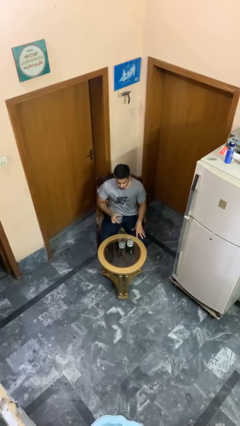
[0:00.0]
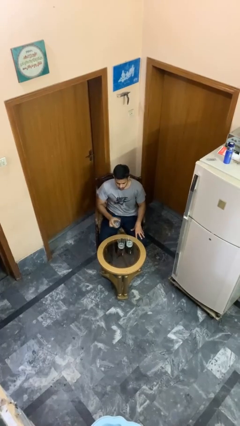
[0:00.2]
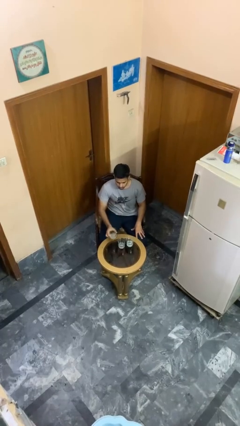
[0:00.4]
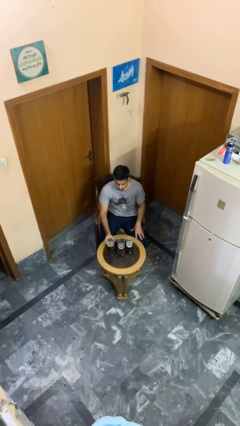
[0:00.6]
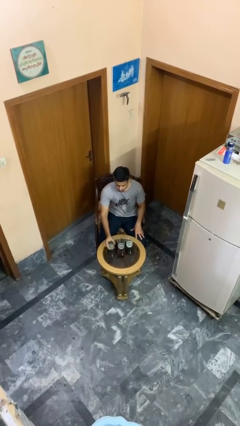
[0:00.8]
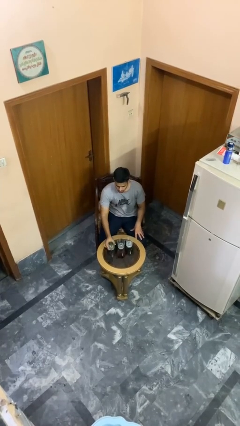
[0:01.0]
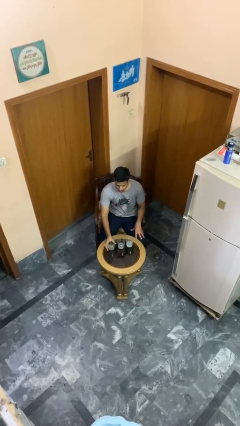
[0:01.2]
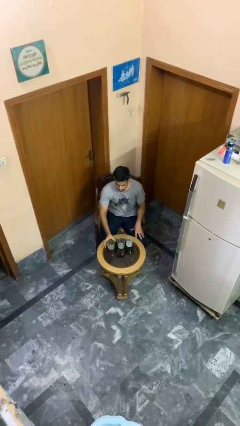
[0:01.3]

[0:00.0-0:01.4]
person puts down object on table

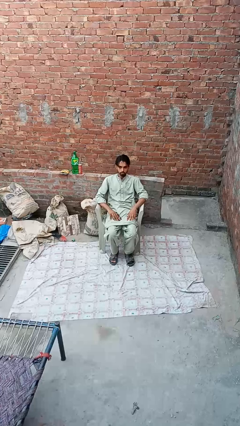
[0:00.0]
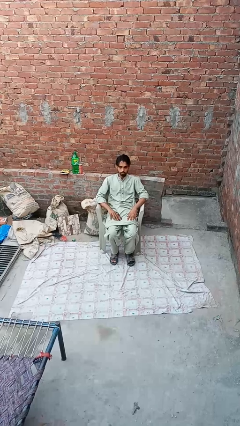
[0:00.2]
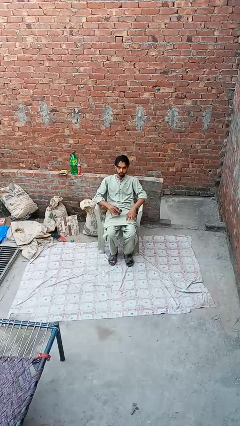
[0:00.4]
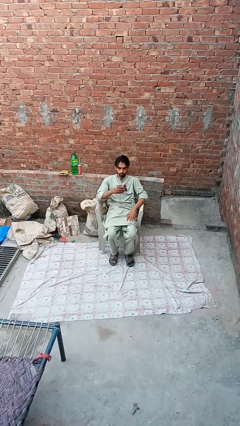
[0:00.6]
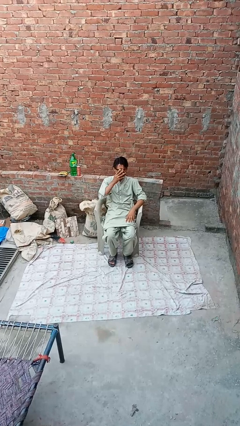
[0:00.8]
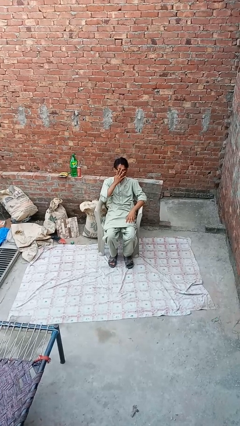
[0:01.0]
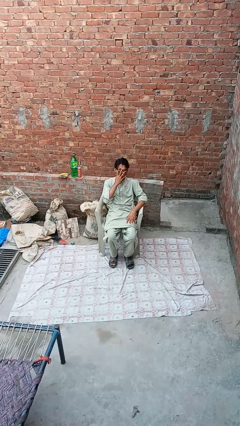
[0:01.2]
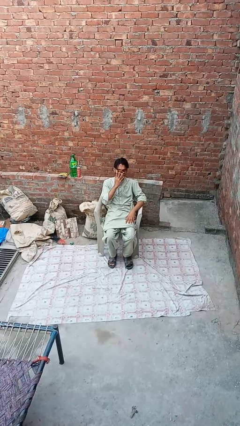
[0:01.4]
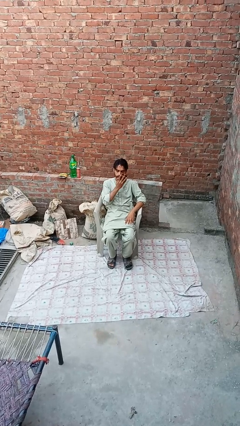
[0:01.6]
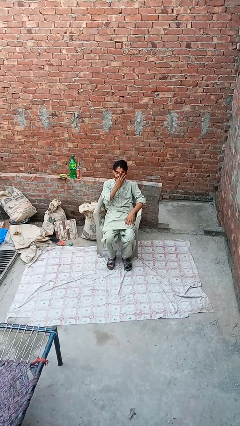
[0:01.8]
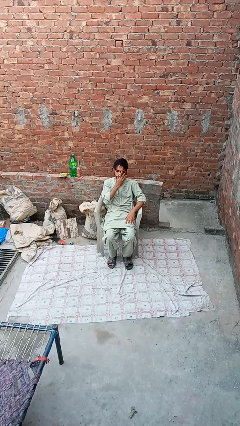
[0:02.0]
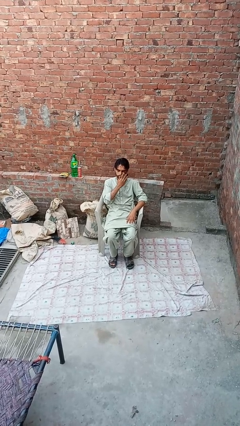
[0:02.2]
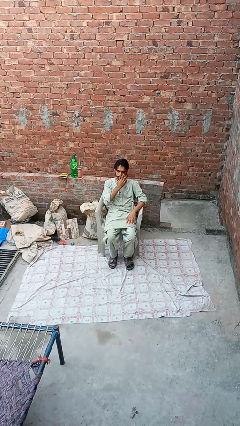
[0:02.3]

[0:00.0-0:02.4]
person wipes mouth with napkin

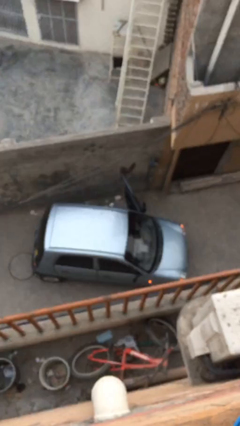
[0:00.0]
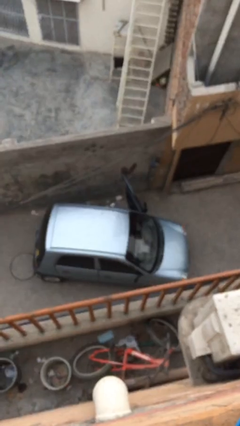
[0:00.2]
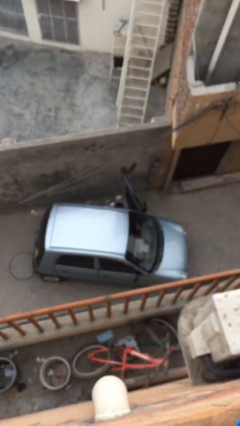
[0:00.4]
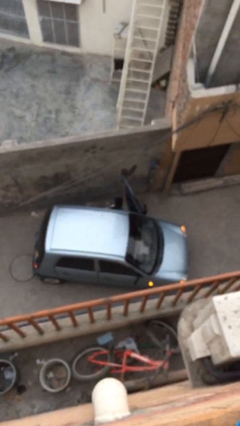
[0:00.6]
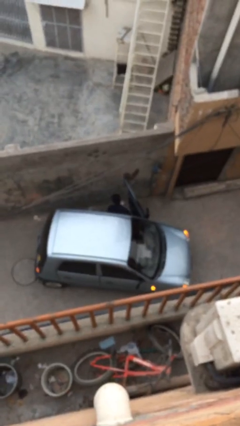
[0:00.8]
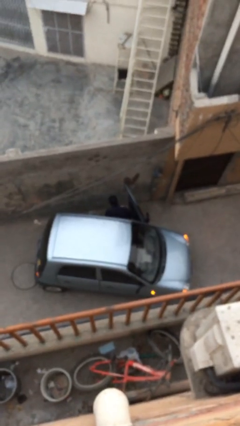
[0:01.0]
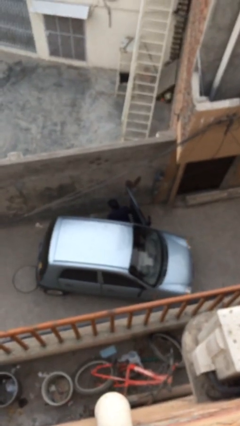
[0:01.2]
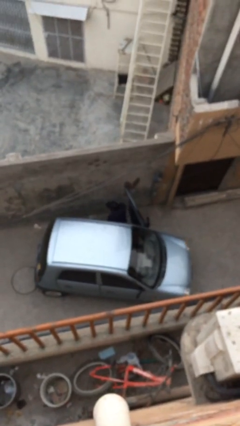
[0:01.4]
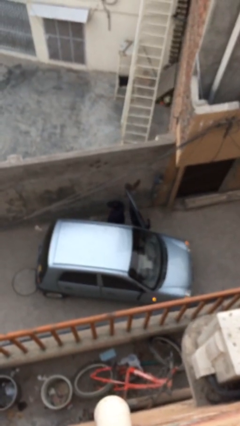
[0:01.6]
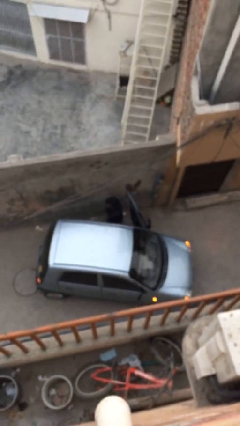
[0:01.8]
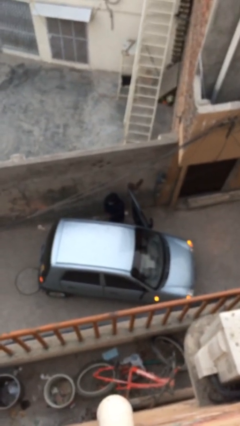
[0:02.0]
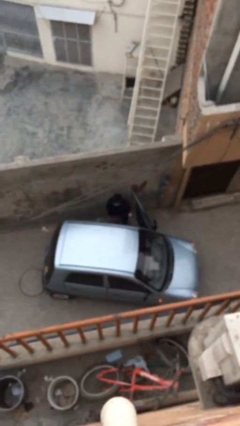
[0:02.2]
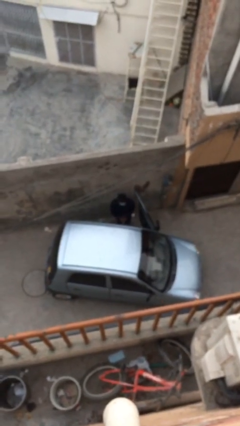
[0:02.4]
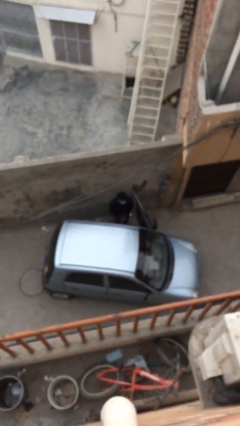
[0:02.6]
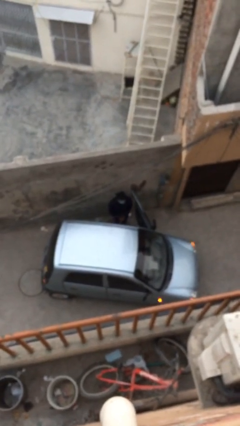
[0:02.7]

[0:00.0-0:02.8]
person exits car

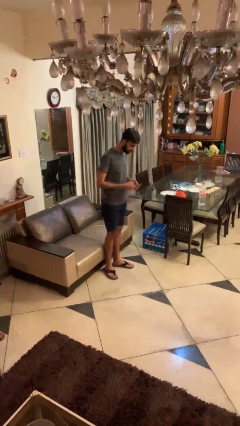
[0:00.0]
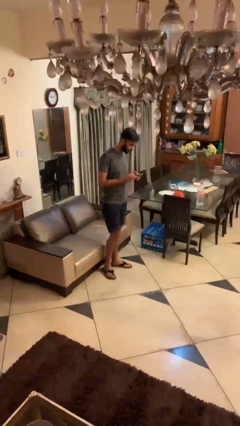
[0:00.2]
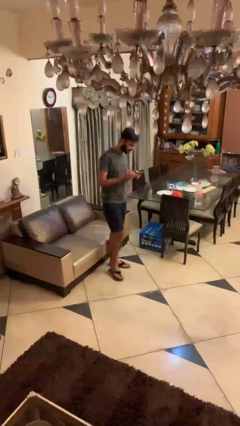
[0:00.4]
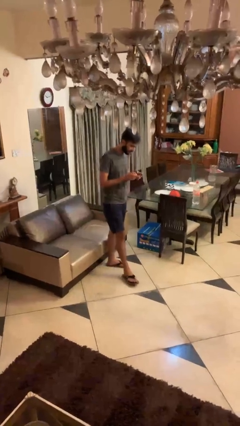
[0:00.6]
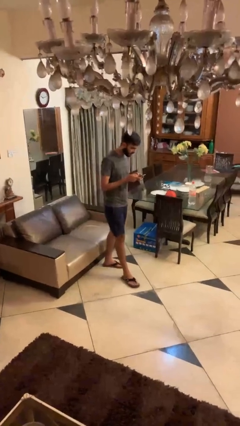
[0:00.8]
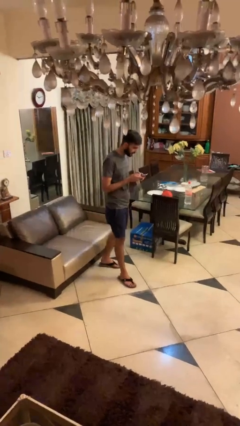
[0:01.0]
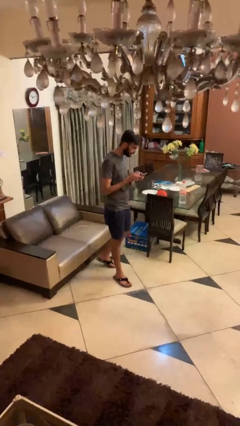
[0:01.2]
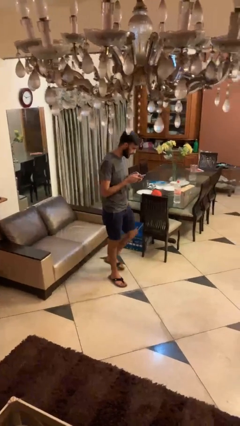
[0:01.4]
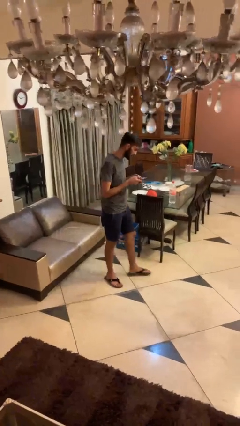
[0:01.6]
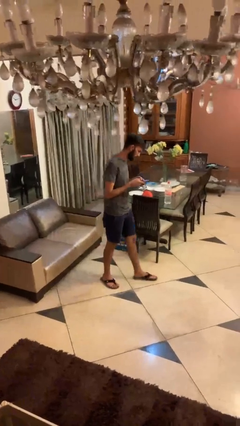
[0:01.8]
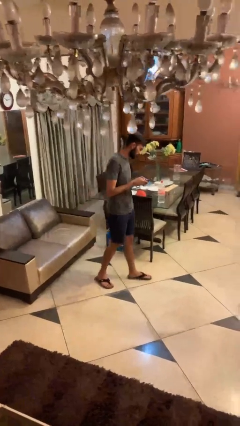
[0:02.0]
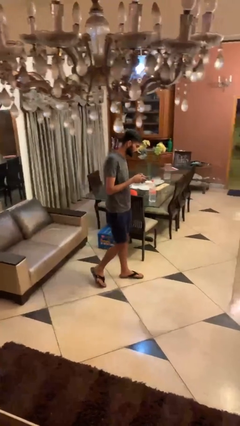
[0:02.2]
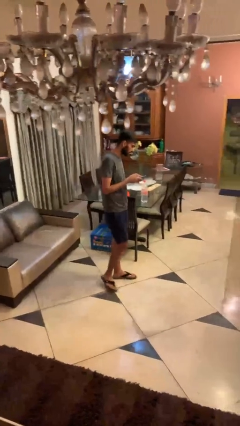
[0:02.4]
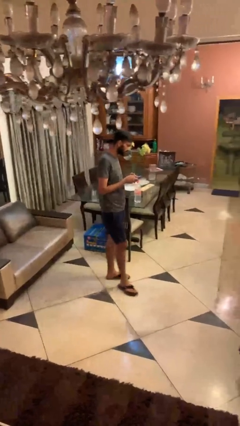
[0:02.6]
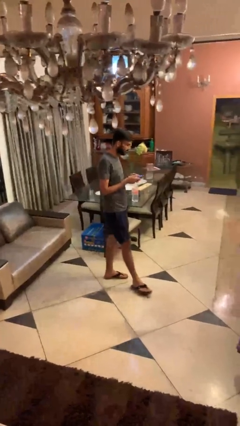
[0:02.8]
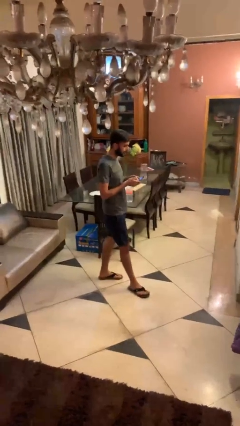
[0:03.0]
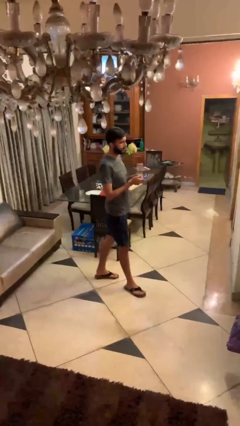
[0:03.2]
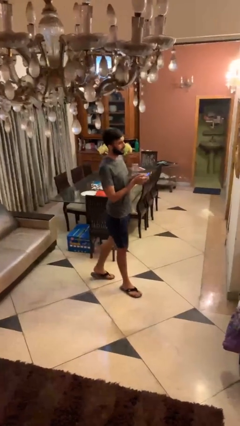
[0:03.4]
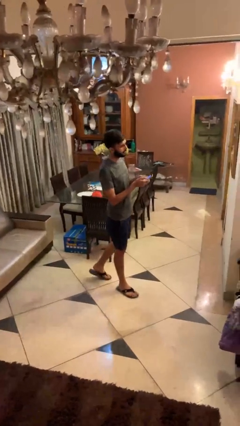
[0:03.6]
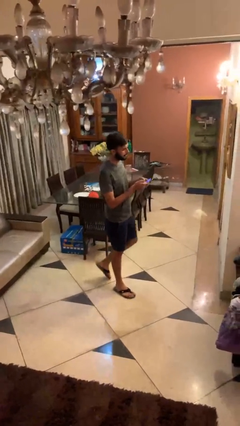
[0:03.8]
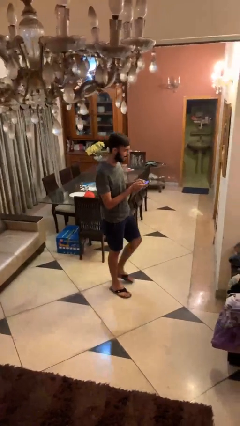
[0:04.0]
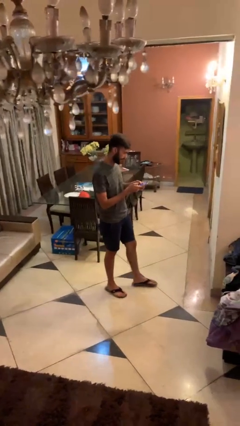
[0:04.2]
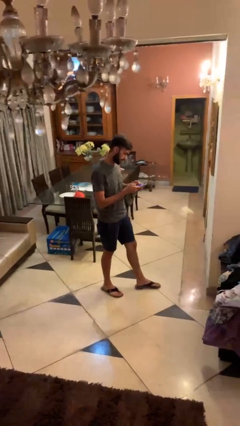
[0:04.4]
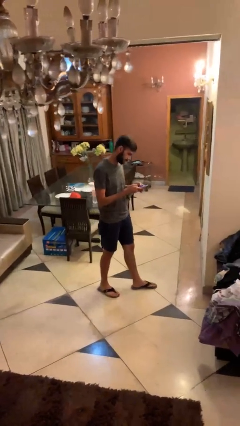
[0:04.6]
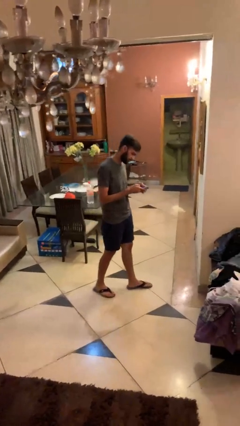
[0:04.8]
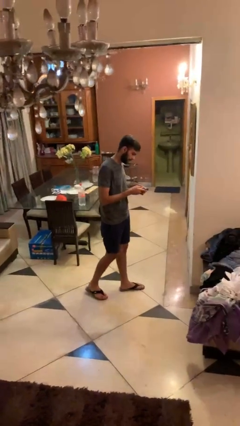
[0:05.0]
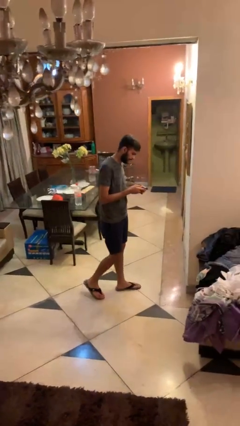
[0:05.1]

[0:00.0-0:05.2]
person texts on phone

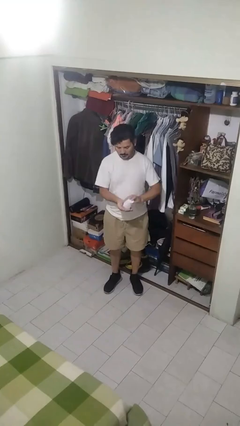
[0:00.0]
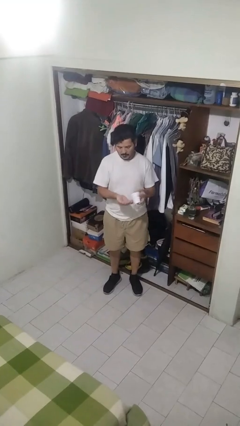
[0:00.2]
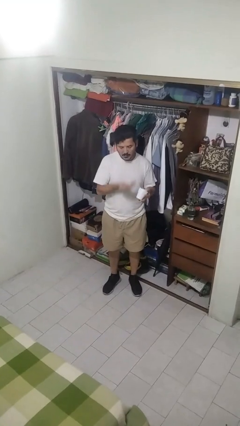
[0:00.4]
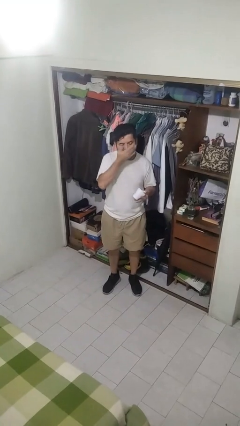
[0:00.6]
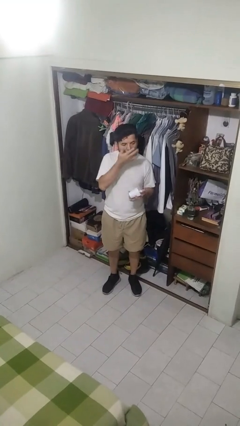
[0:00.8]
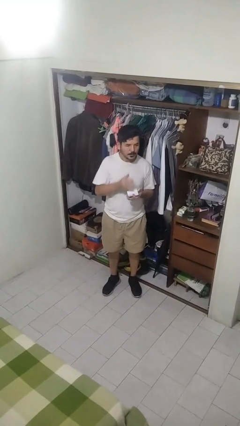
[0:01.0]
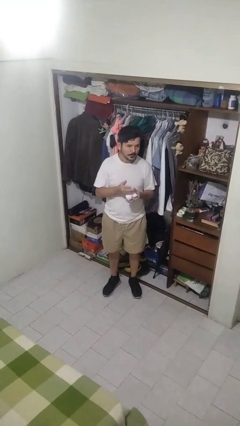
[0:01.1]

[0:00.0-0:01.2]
person takes medicine pills

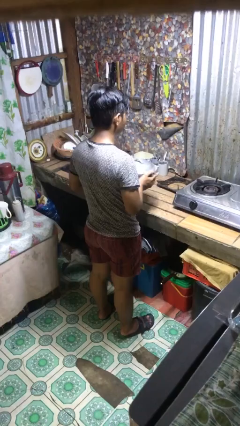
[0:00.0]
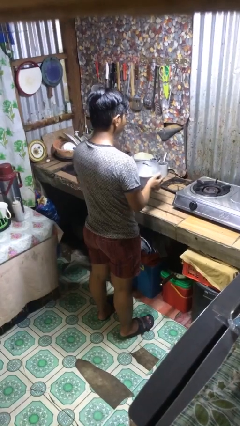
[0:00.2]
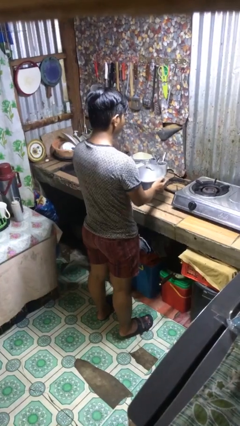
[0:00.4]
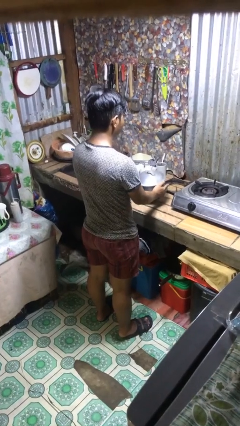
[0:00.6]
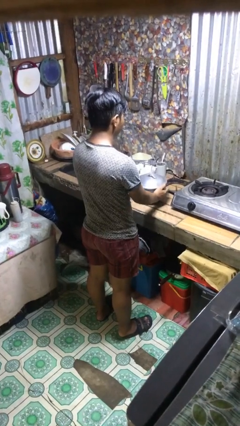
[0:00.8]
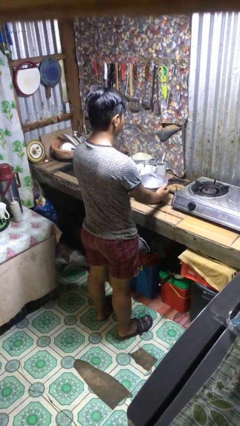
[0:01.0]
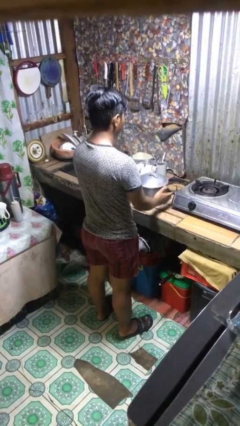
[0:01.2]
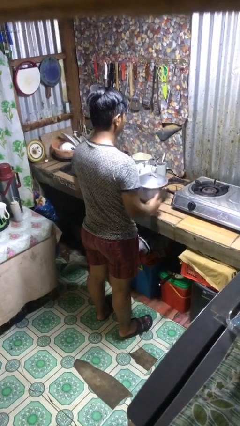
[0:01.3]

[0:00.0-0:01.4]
person puts down object on countertop

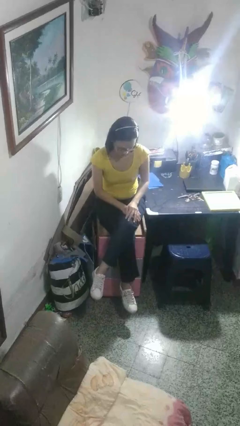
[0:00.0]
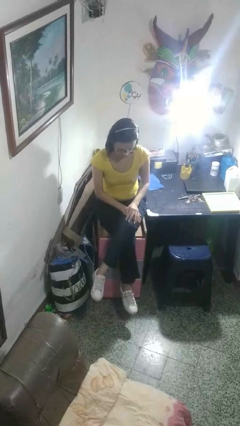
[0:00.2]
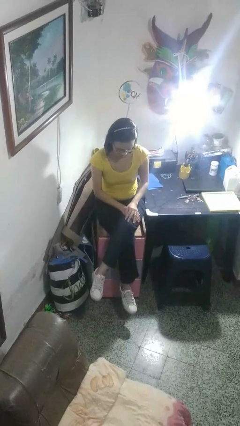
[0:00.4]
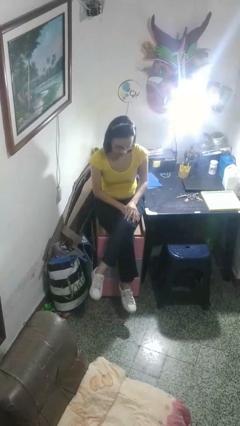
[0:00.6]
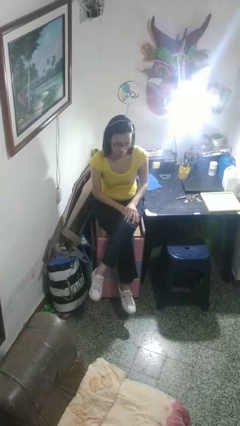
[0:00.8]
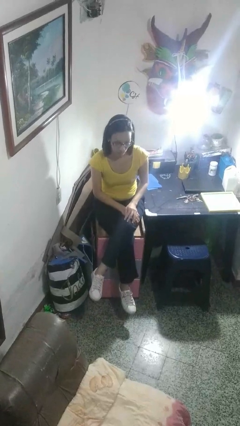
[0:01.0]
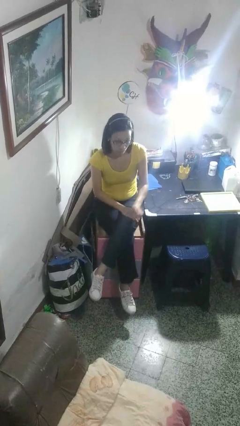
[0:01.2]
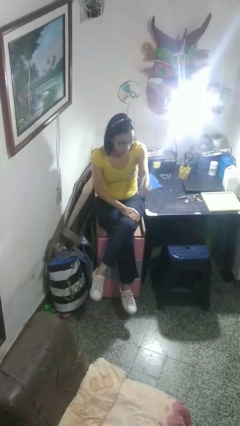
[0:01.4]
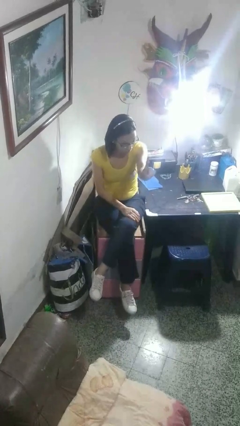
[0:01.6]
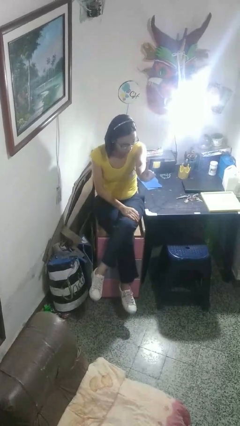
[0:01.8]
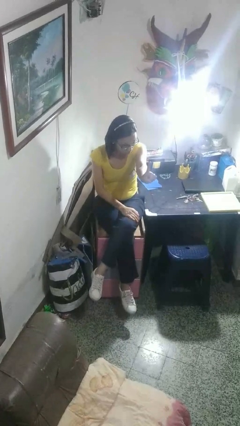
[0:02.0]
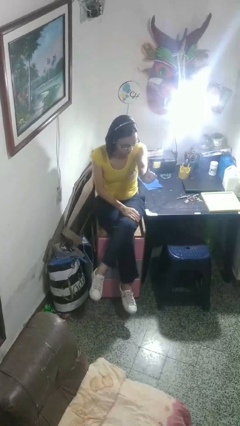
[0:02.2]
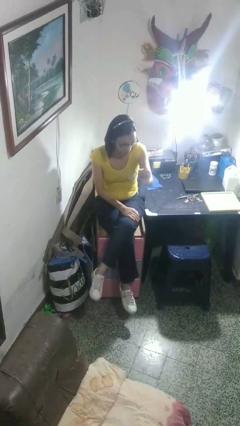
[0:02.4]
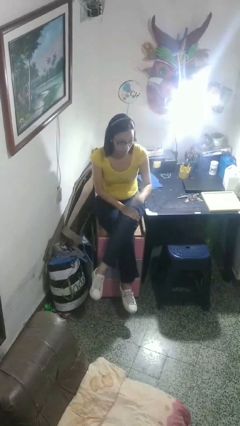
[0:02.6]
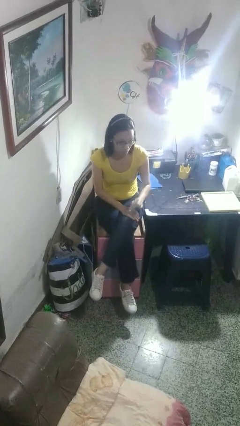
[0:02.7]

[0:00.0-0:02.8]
person gestures number one
